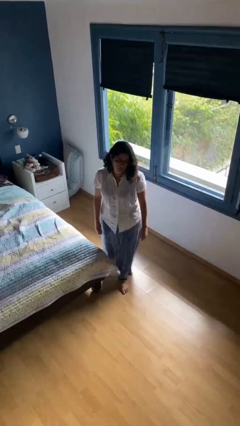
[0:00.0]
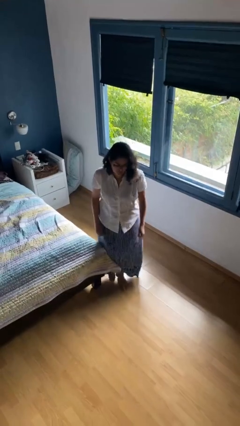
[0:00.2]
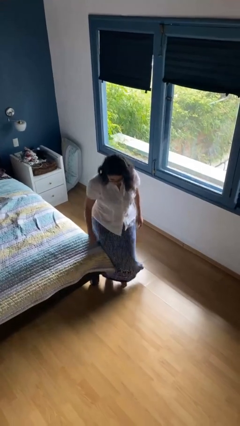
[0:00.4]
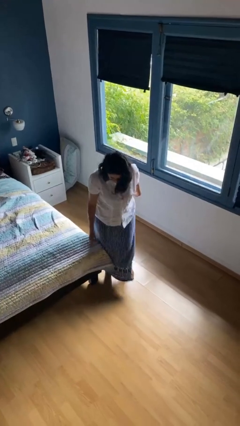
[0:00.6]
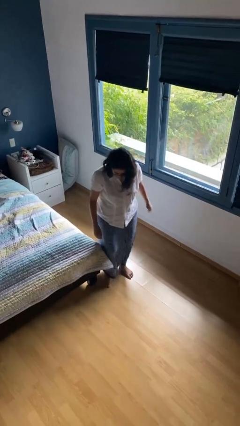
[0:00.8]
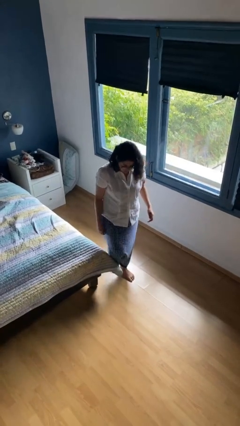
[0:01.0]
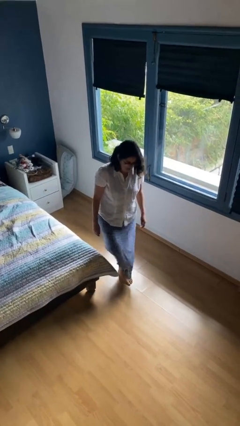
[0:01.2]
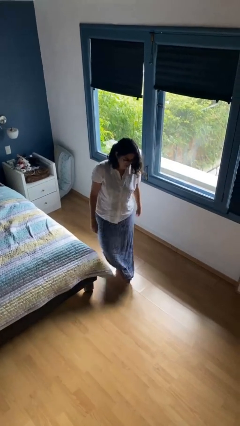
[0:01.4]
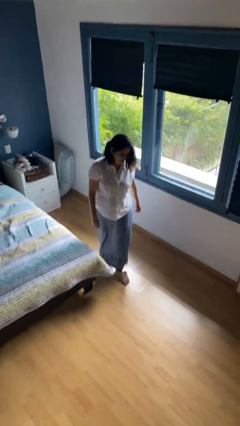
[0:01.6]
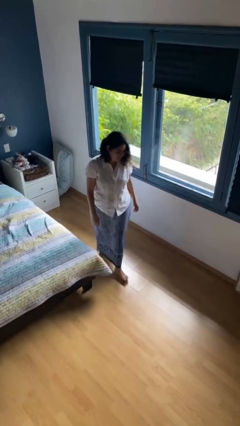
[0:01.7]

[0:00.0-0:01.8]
person stubs toe

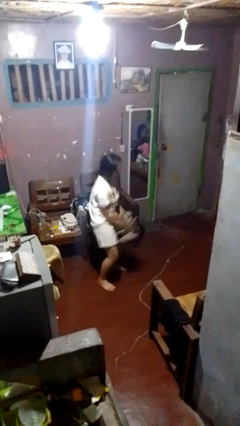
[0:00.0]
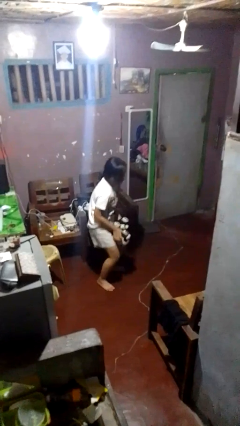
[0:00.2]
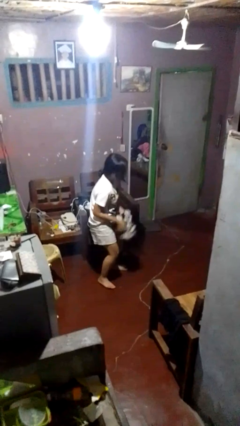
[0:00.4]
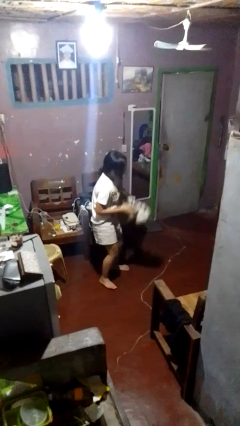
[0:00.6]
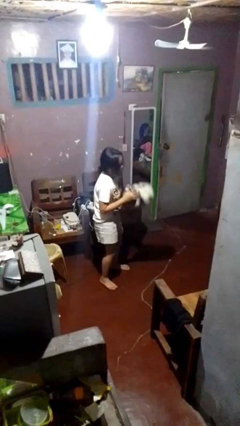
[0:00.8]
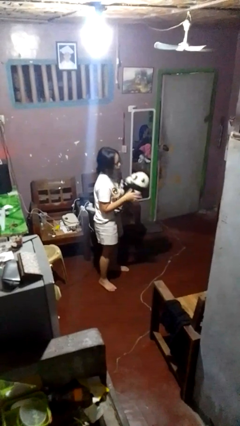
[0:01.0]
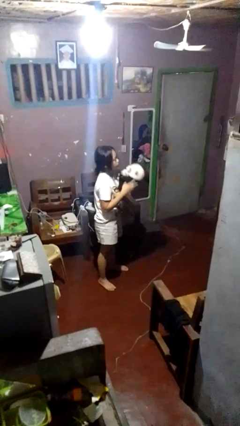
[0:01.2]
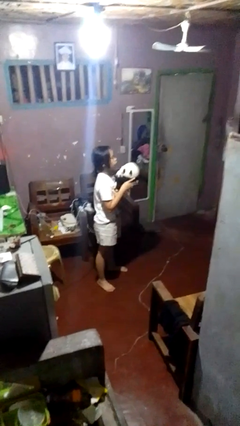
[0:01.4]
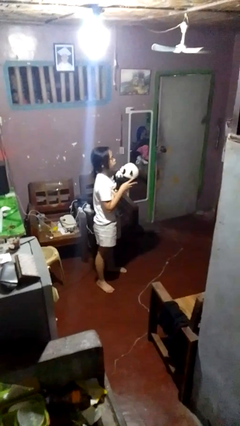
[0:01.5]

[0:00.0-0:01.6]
person catches dropped object

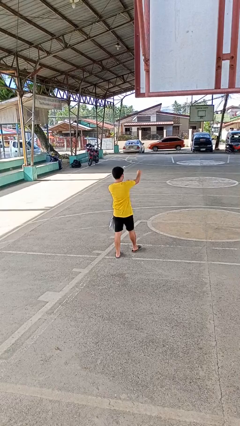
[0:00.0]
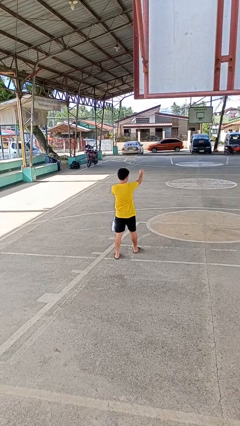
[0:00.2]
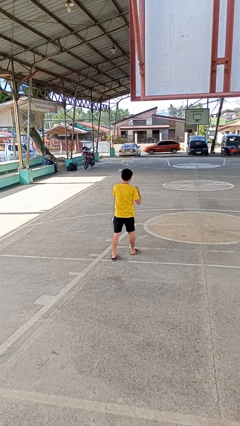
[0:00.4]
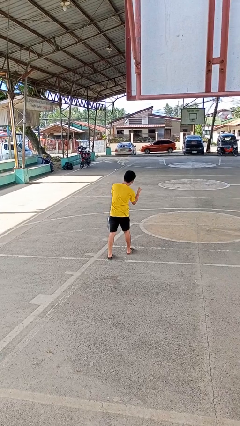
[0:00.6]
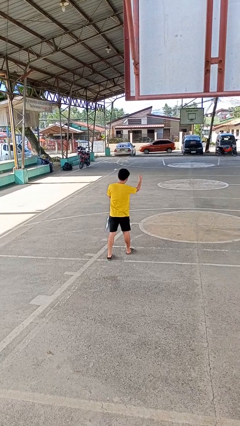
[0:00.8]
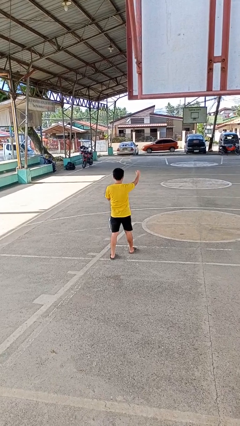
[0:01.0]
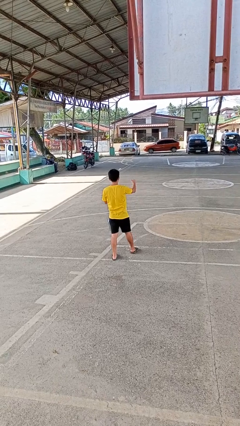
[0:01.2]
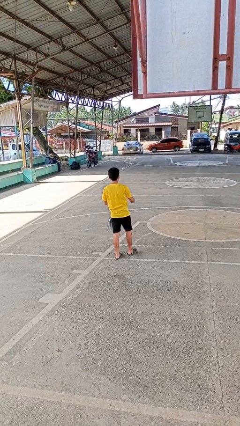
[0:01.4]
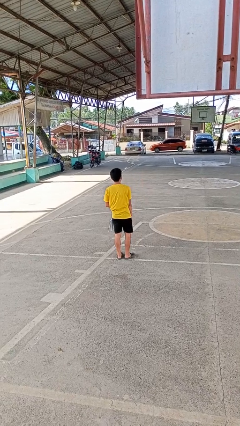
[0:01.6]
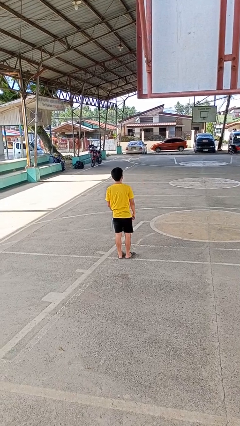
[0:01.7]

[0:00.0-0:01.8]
person punches

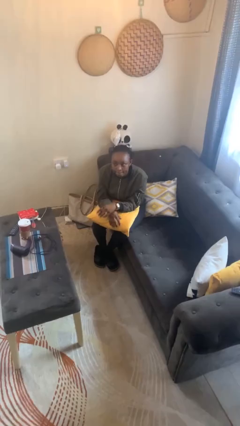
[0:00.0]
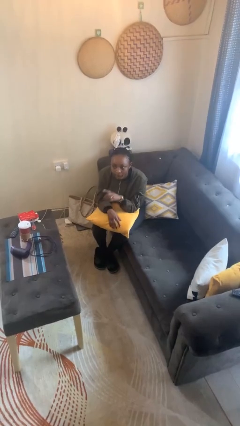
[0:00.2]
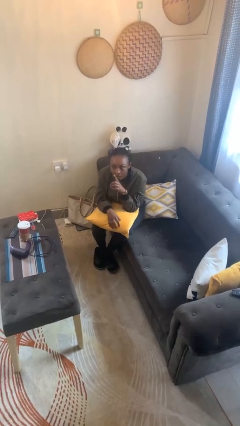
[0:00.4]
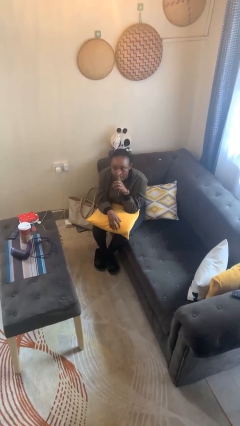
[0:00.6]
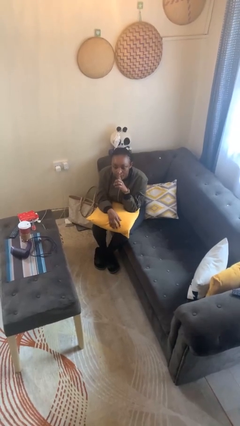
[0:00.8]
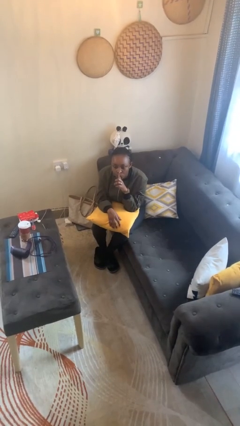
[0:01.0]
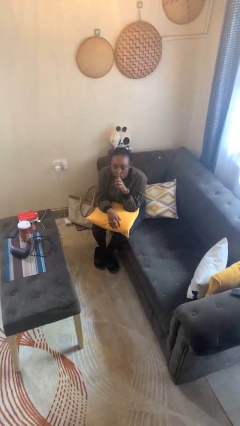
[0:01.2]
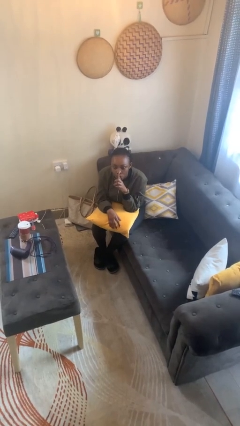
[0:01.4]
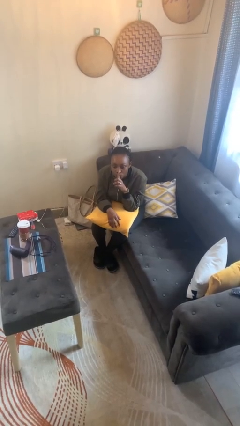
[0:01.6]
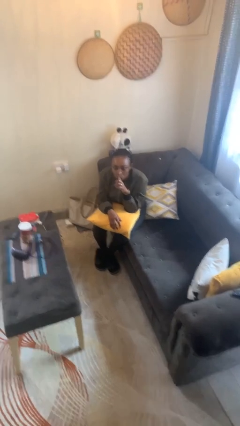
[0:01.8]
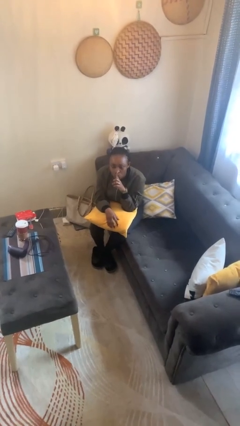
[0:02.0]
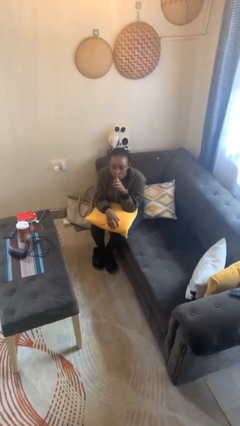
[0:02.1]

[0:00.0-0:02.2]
person gestures be quiet

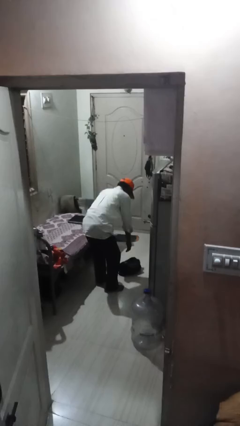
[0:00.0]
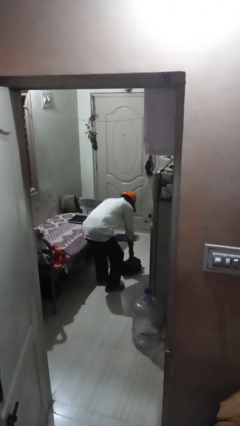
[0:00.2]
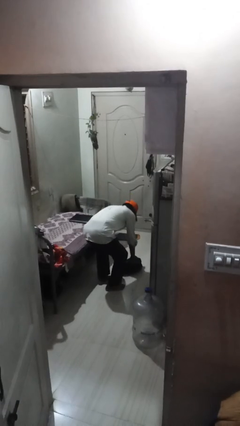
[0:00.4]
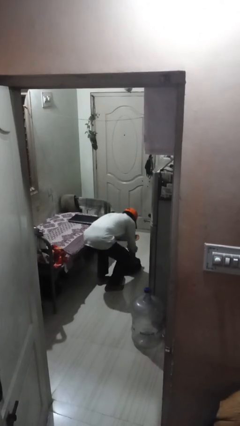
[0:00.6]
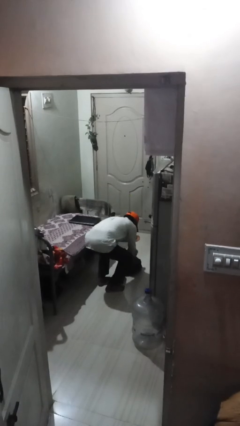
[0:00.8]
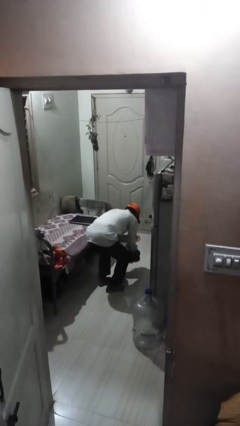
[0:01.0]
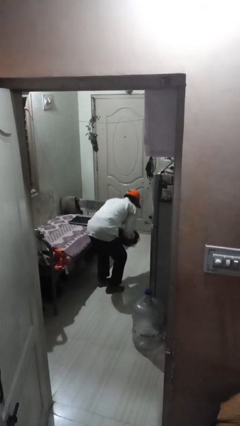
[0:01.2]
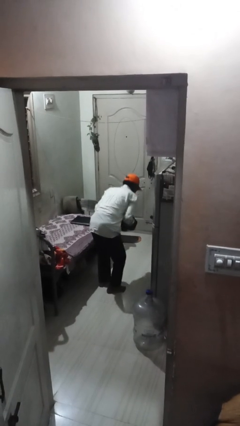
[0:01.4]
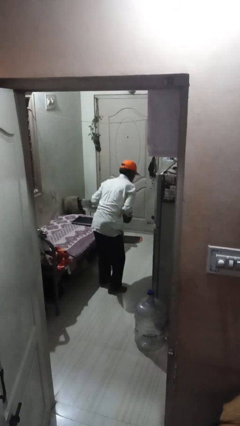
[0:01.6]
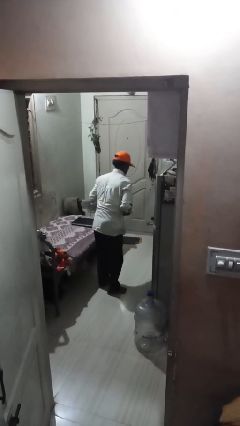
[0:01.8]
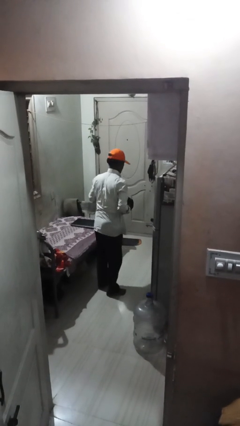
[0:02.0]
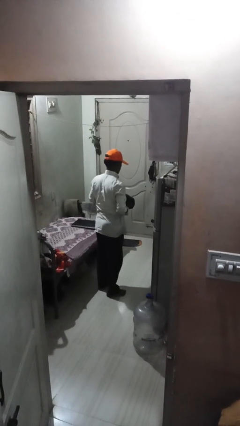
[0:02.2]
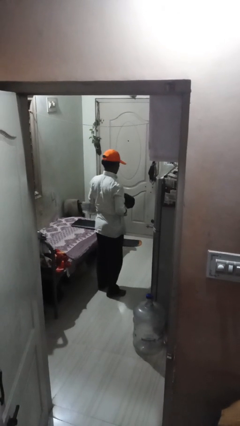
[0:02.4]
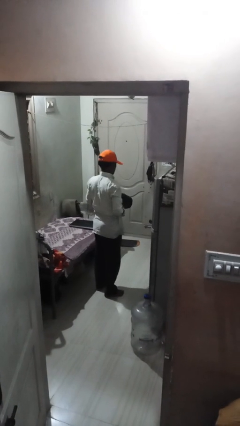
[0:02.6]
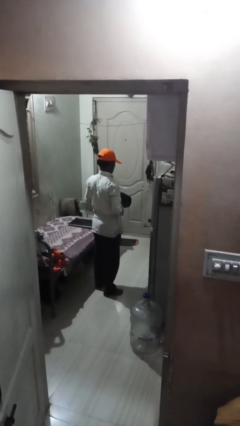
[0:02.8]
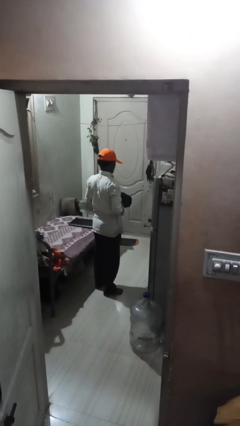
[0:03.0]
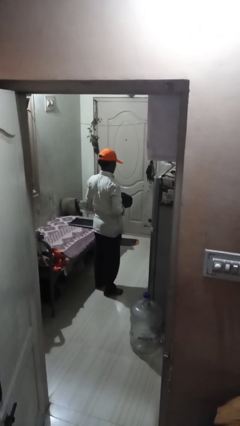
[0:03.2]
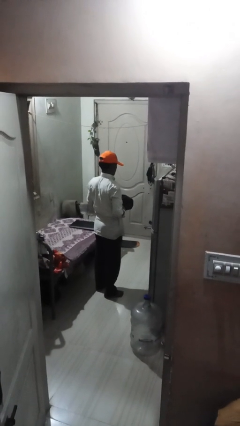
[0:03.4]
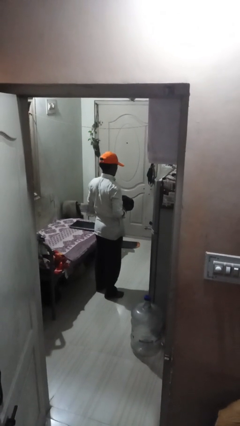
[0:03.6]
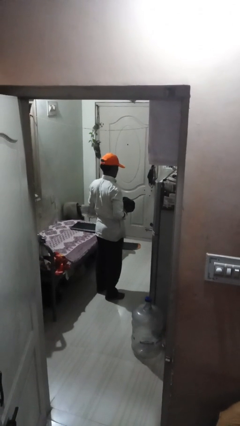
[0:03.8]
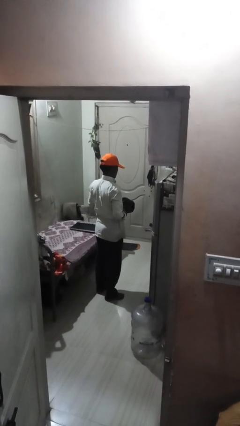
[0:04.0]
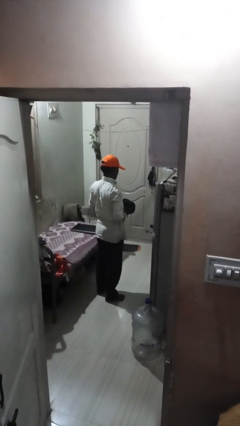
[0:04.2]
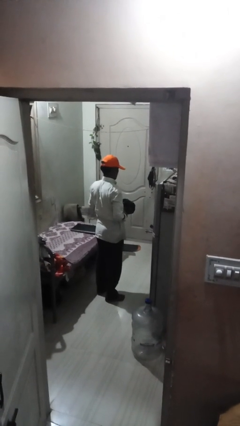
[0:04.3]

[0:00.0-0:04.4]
person picks up object from floor

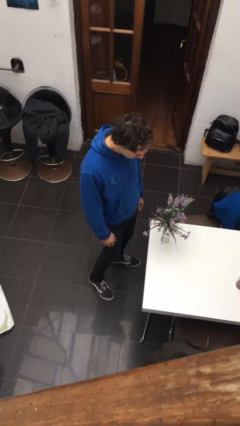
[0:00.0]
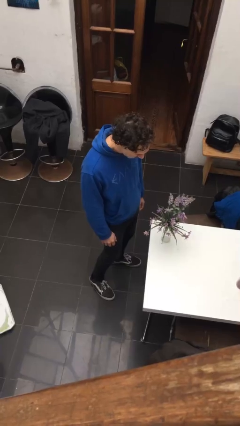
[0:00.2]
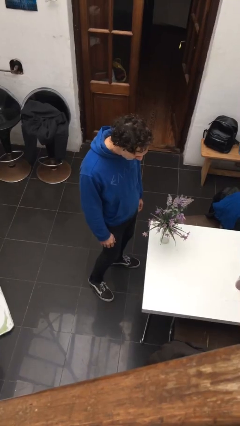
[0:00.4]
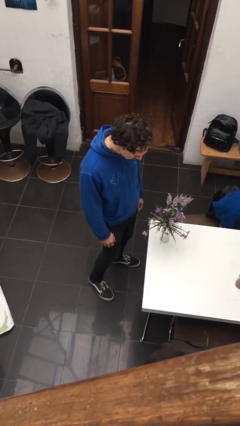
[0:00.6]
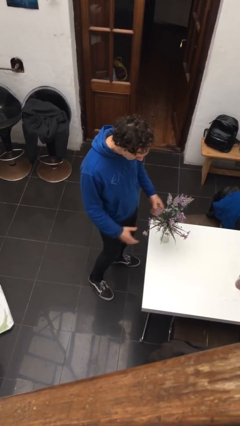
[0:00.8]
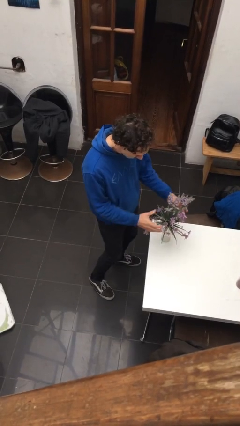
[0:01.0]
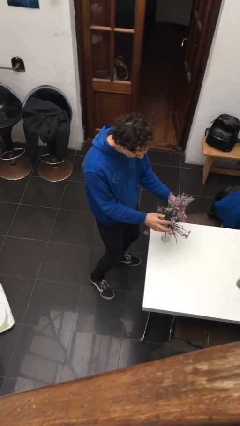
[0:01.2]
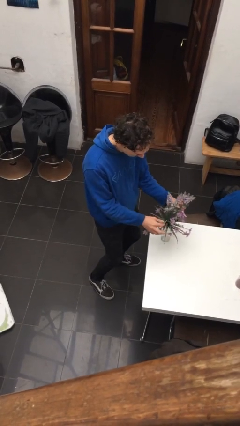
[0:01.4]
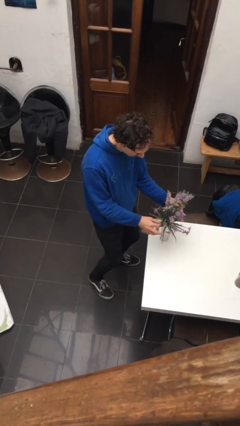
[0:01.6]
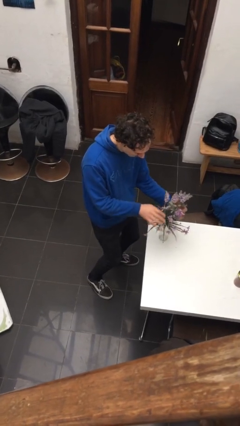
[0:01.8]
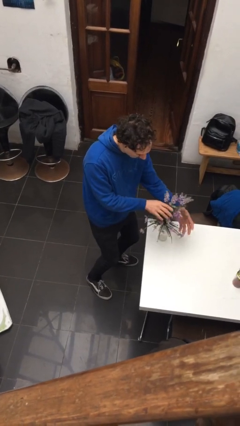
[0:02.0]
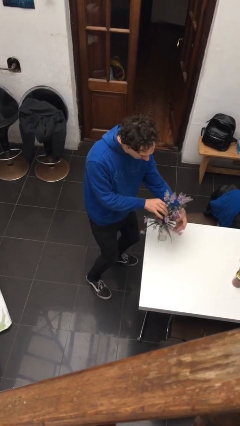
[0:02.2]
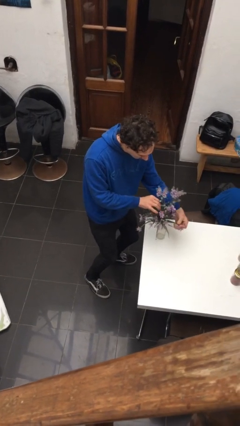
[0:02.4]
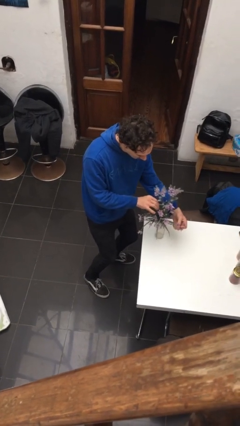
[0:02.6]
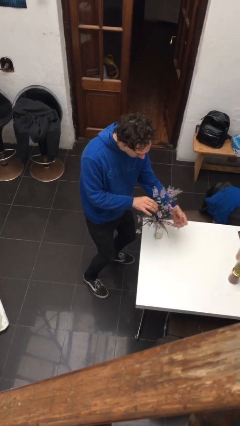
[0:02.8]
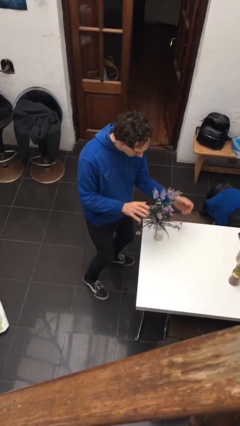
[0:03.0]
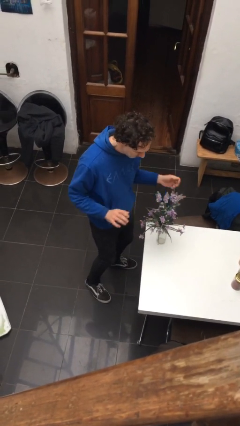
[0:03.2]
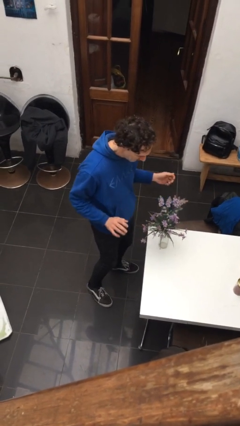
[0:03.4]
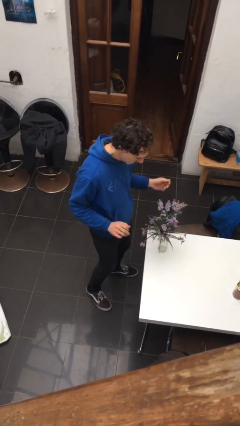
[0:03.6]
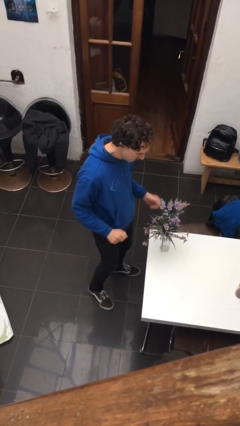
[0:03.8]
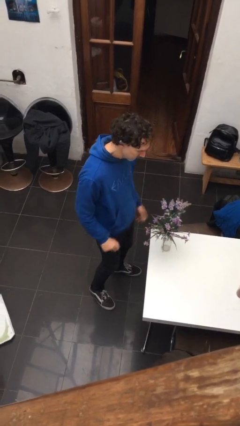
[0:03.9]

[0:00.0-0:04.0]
person arranges flowers in vase

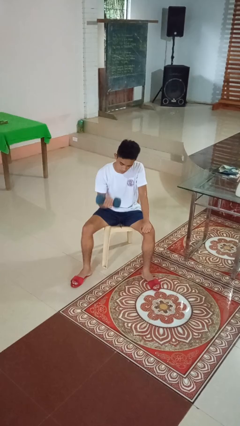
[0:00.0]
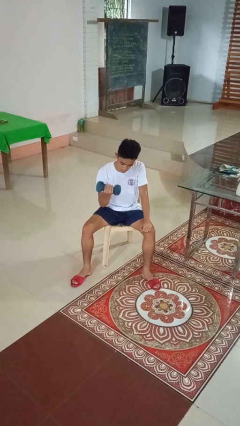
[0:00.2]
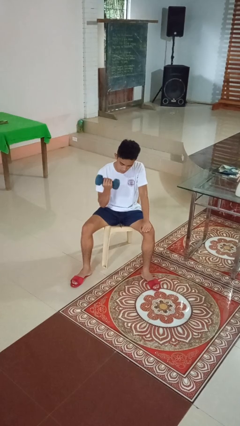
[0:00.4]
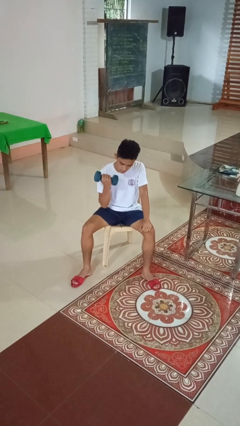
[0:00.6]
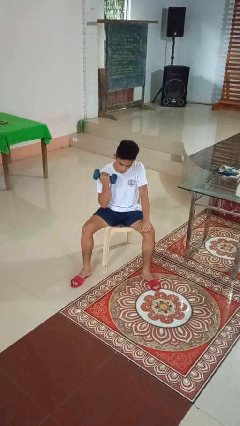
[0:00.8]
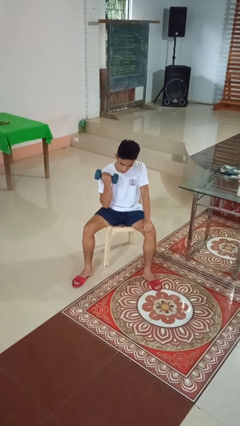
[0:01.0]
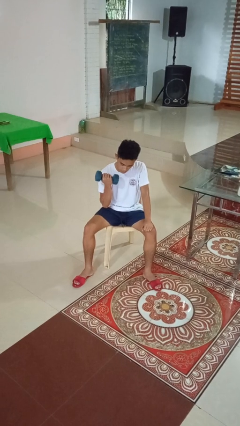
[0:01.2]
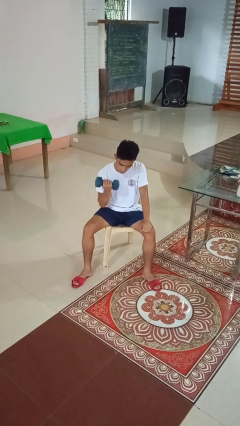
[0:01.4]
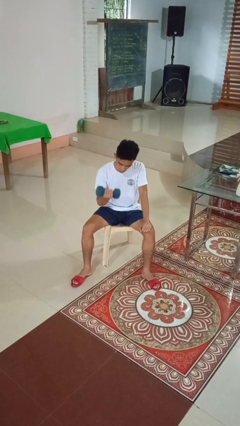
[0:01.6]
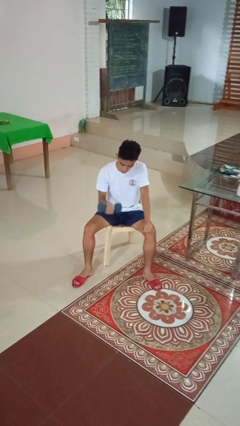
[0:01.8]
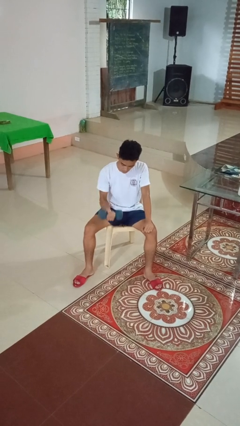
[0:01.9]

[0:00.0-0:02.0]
person lifts dumbbells
